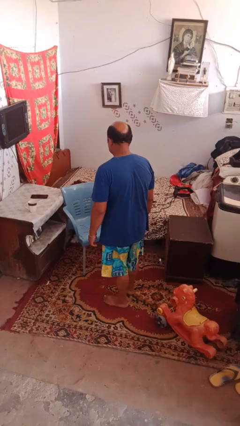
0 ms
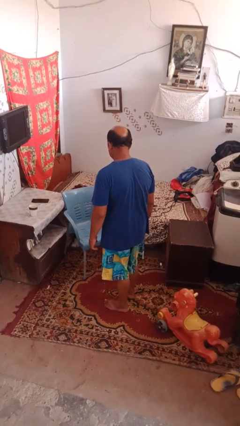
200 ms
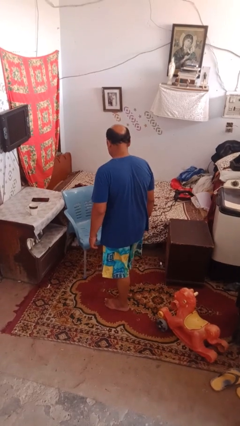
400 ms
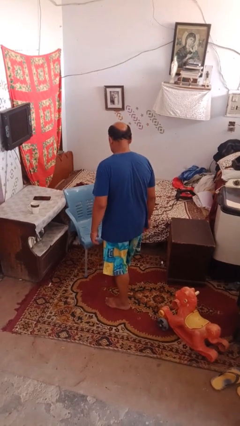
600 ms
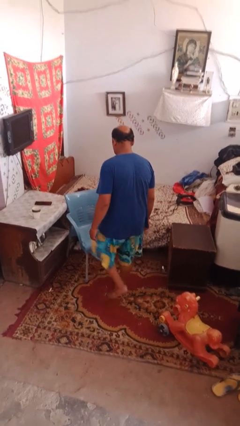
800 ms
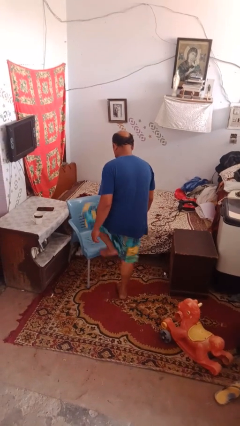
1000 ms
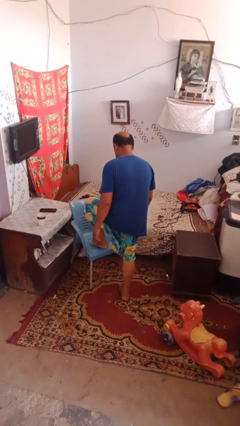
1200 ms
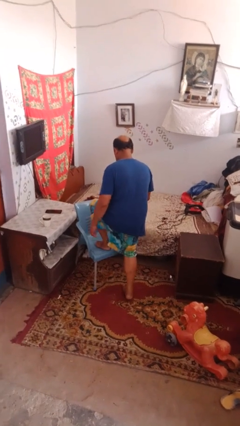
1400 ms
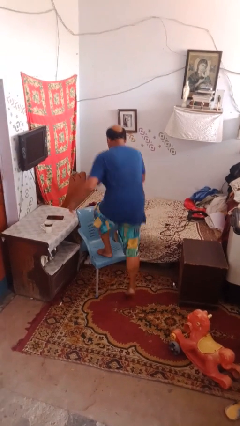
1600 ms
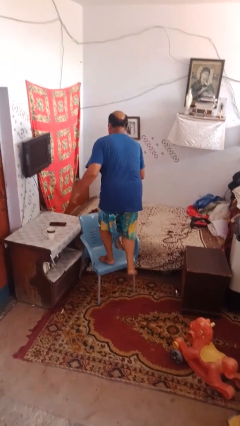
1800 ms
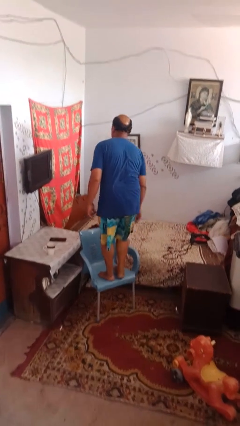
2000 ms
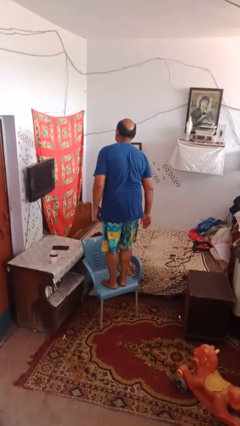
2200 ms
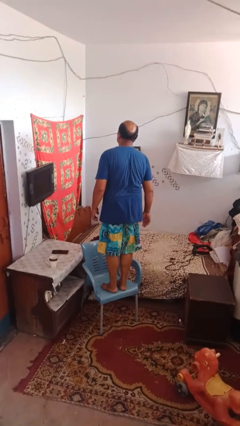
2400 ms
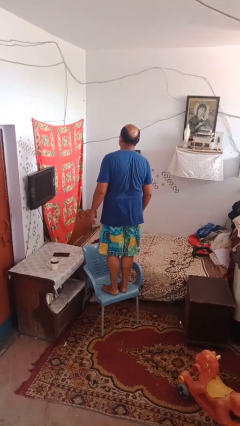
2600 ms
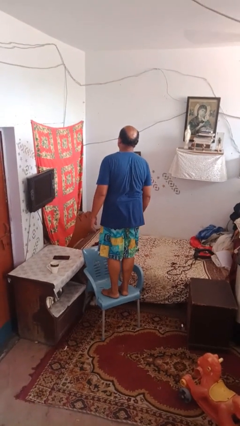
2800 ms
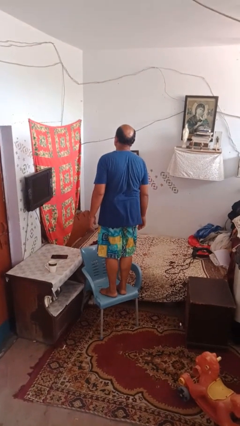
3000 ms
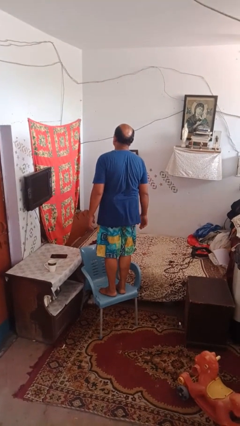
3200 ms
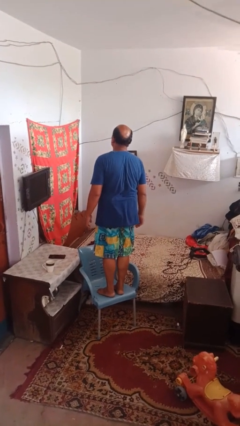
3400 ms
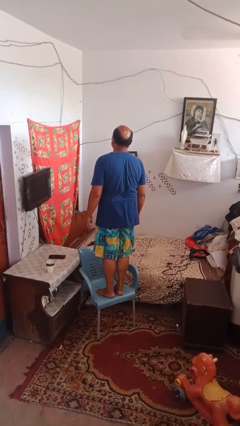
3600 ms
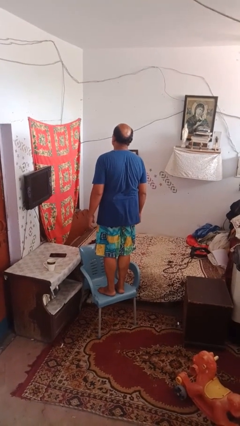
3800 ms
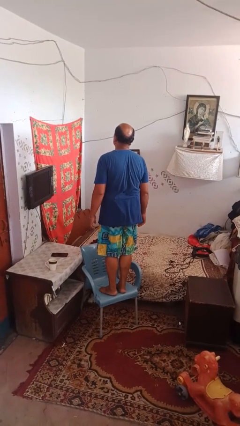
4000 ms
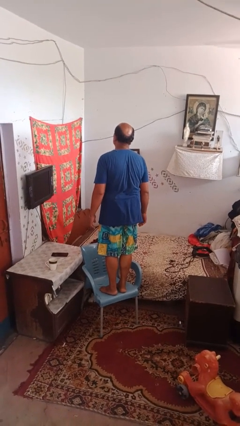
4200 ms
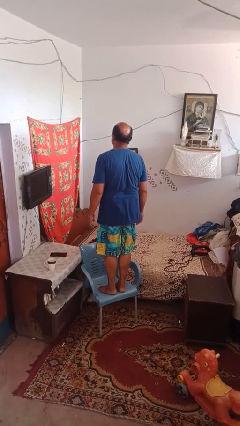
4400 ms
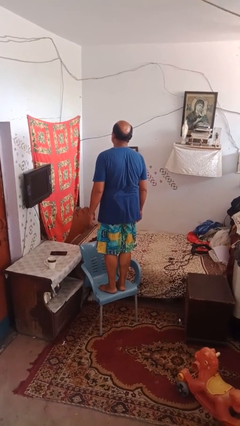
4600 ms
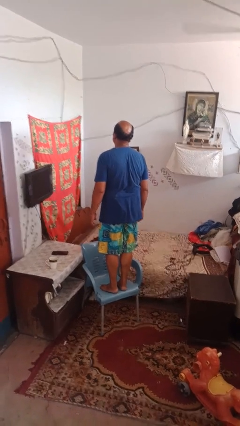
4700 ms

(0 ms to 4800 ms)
person climbs on chair

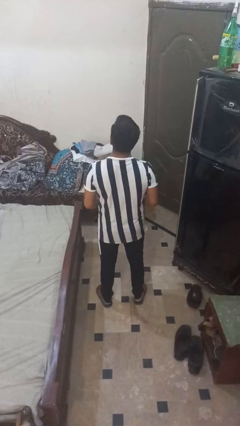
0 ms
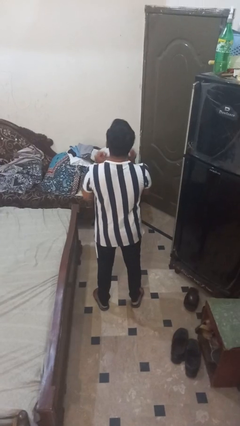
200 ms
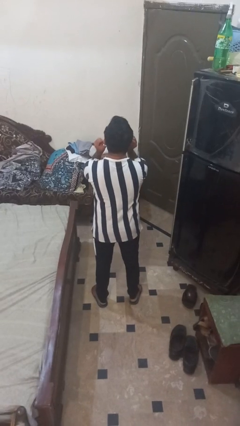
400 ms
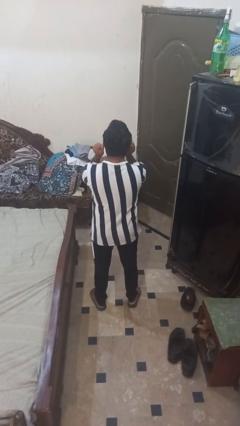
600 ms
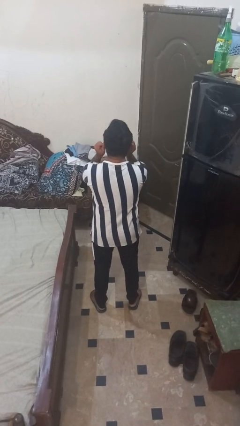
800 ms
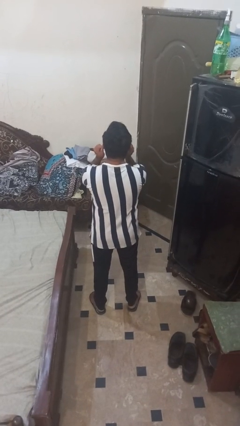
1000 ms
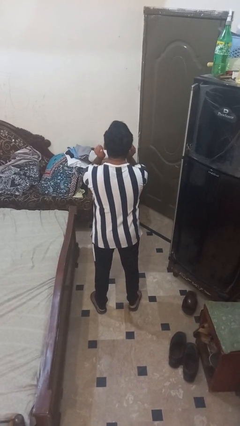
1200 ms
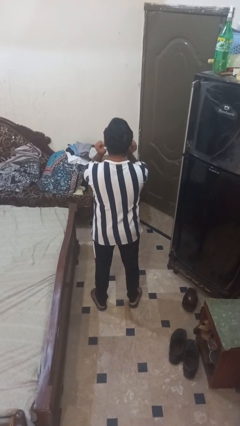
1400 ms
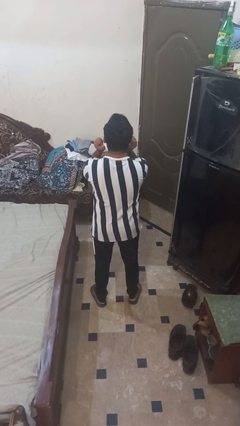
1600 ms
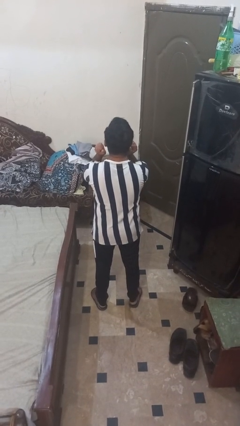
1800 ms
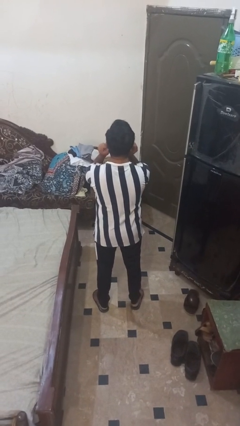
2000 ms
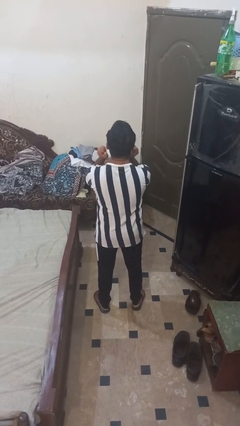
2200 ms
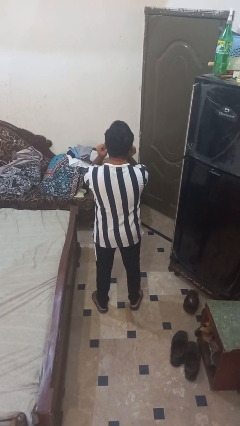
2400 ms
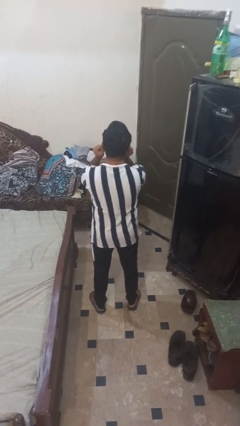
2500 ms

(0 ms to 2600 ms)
person touches earlobe

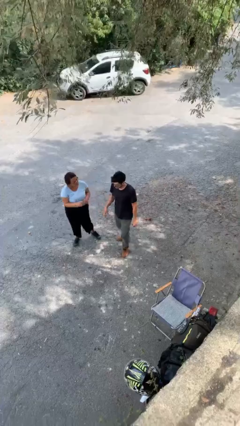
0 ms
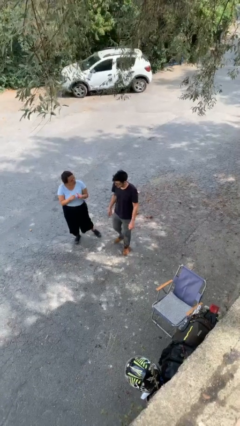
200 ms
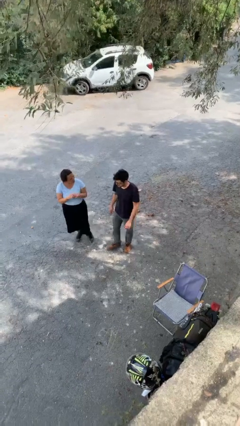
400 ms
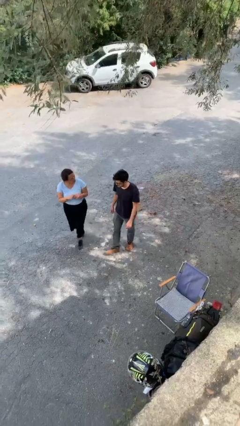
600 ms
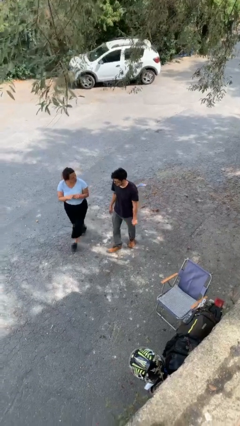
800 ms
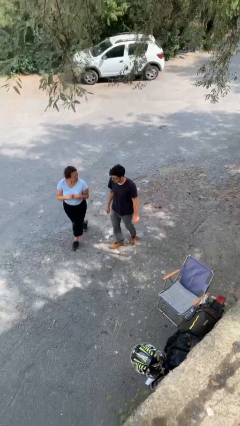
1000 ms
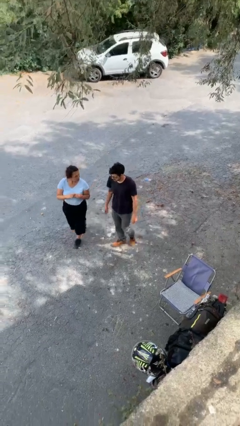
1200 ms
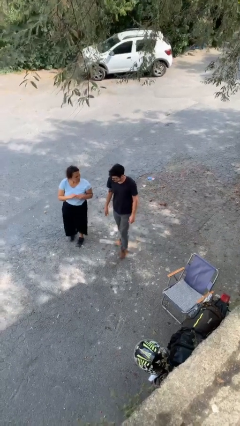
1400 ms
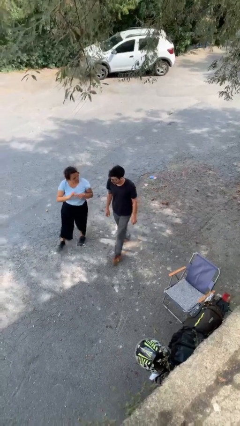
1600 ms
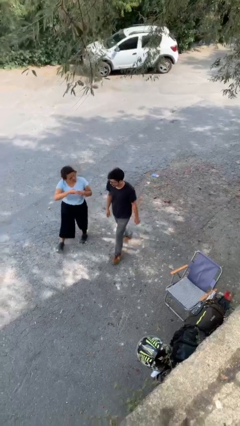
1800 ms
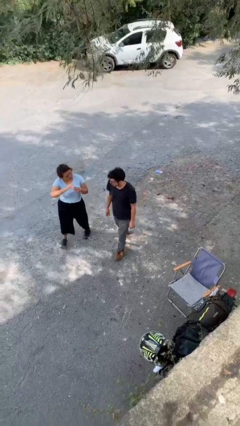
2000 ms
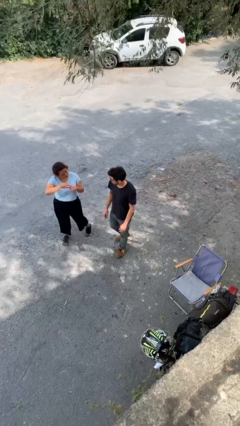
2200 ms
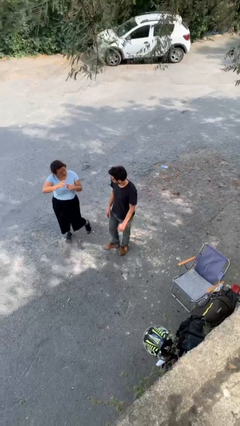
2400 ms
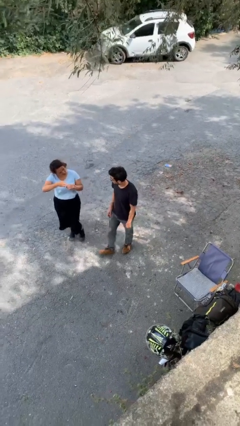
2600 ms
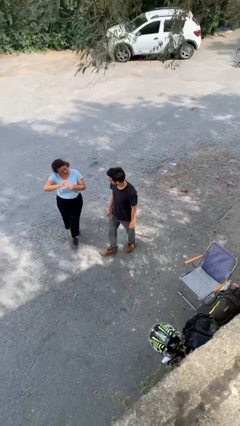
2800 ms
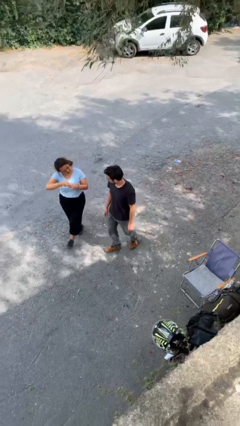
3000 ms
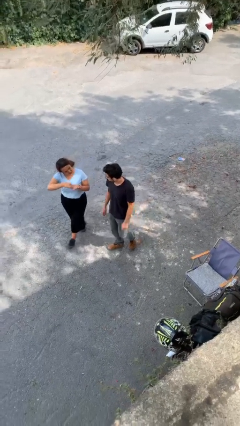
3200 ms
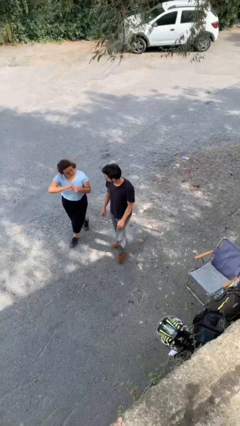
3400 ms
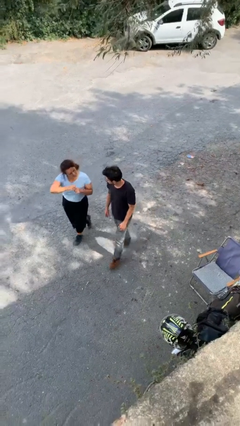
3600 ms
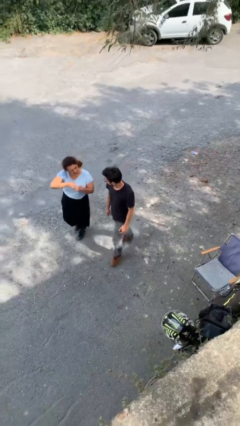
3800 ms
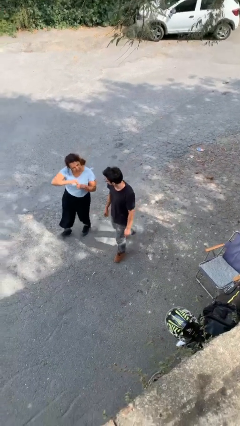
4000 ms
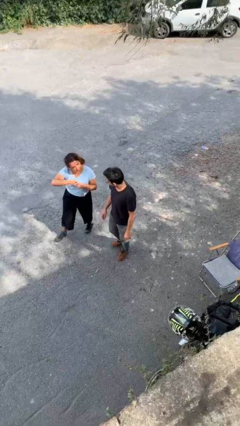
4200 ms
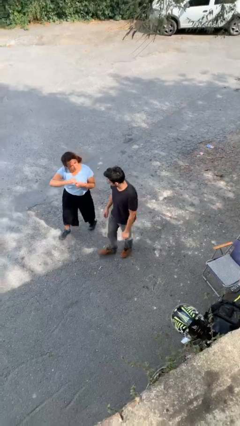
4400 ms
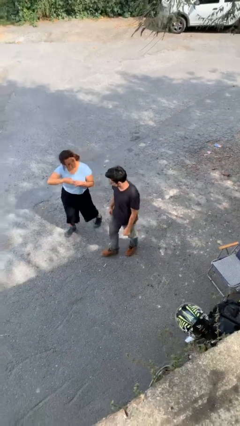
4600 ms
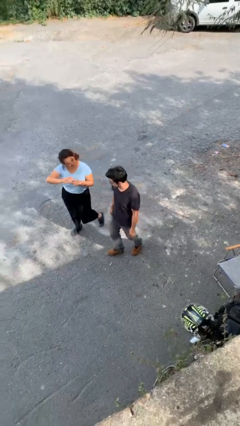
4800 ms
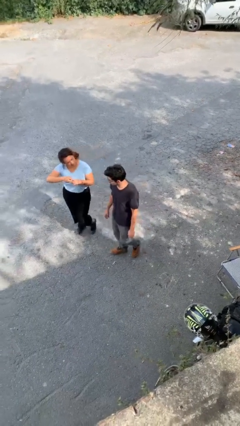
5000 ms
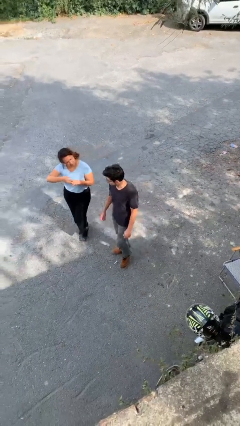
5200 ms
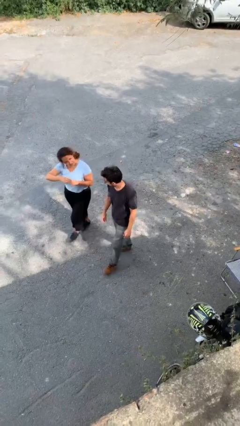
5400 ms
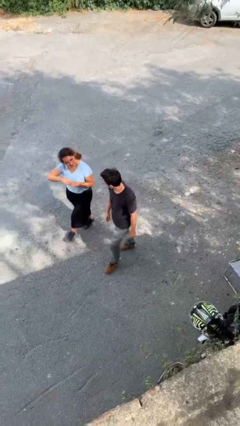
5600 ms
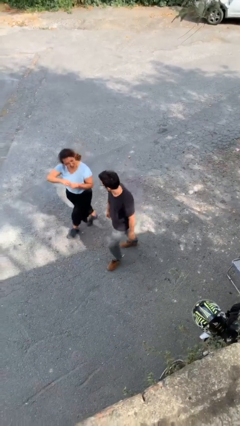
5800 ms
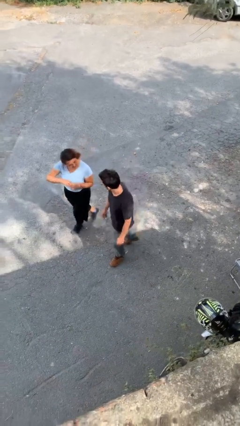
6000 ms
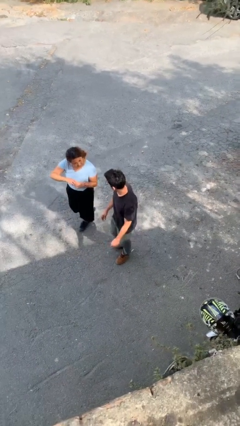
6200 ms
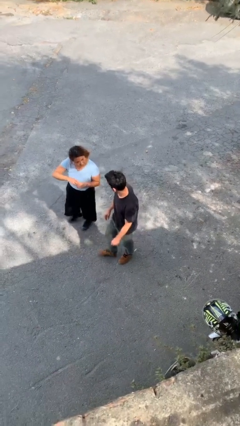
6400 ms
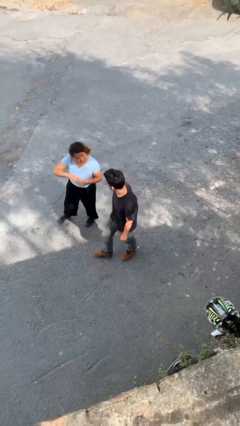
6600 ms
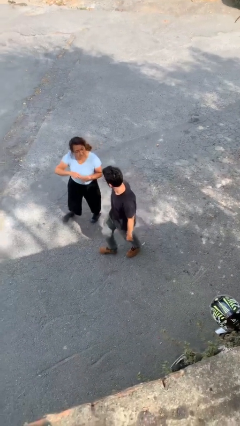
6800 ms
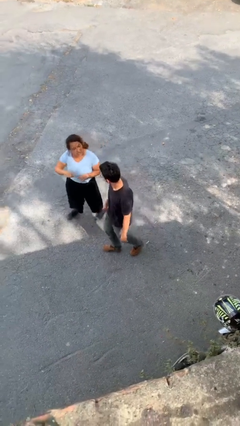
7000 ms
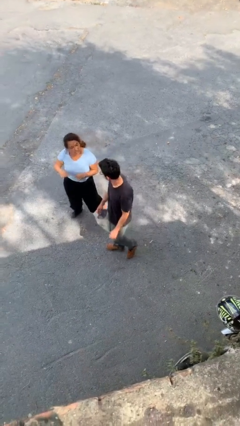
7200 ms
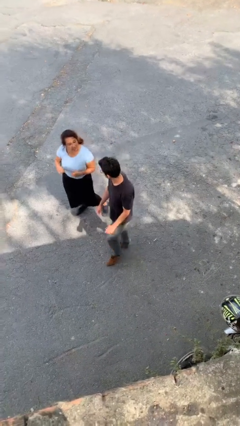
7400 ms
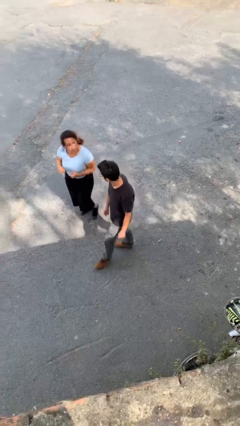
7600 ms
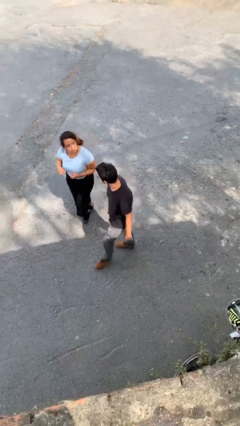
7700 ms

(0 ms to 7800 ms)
person talks to person

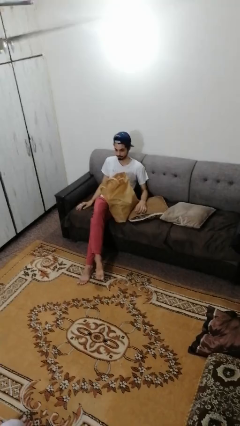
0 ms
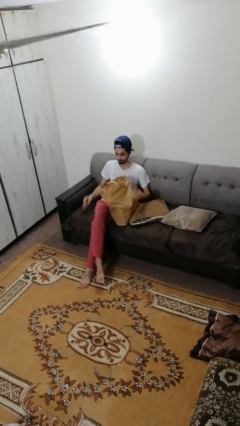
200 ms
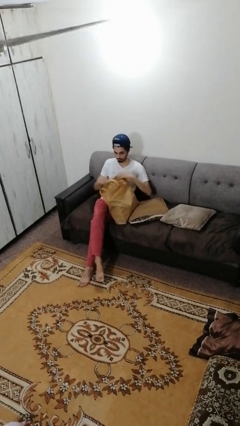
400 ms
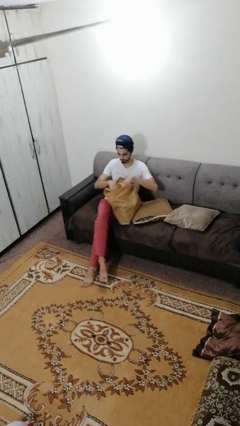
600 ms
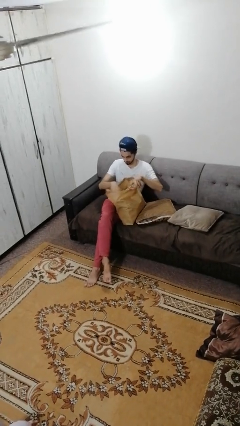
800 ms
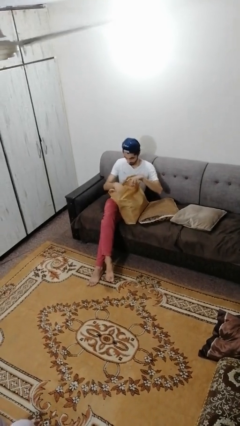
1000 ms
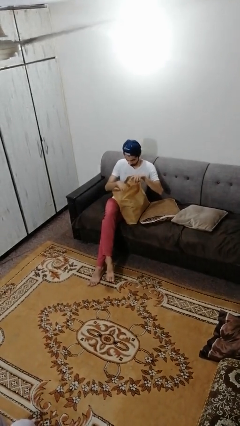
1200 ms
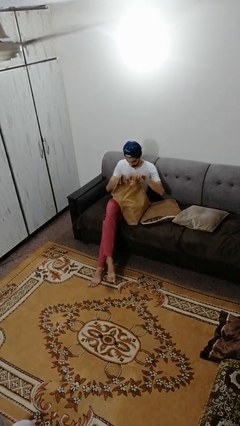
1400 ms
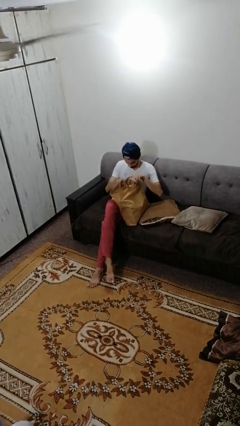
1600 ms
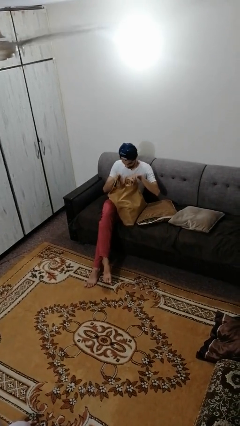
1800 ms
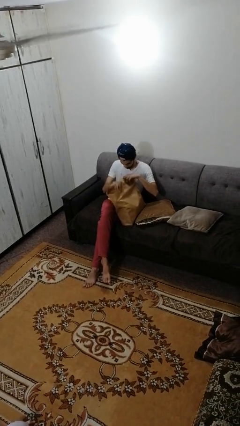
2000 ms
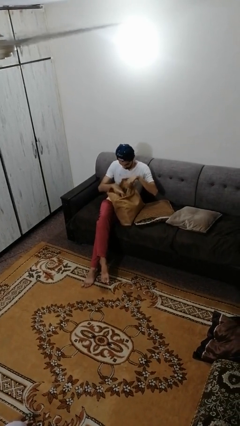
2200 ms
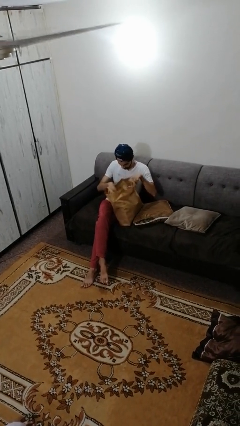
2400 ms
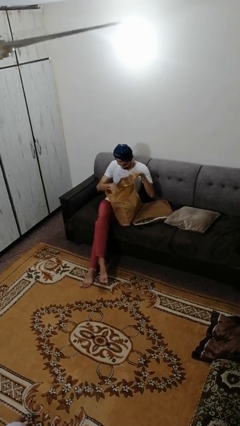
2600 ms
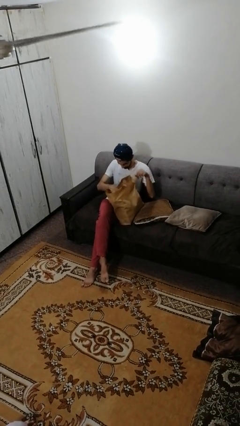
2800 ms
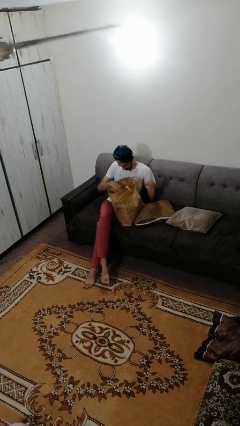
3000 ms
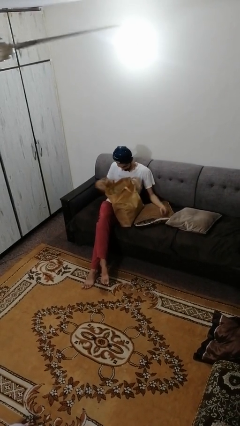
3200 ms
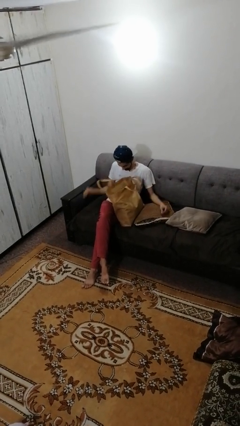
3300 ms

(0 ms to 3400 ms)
person searches in bag
